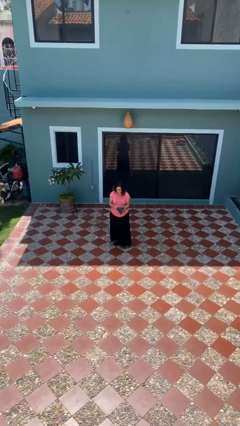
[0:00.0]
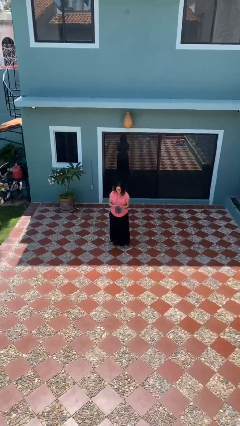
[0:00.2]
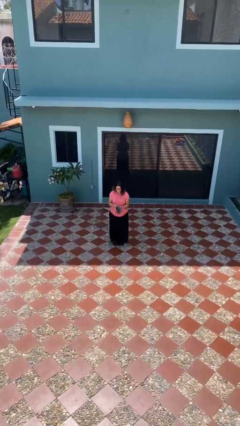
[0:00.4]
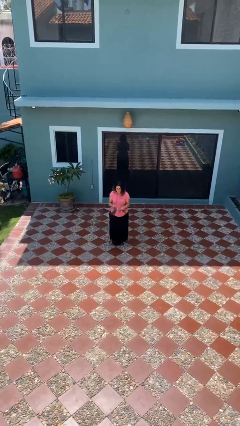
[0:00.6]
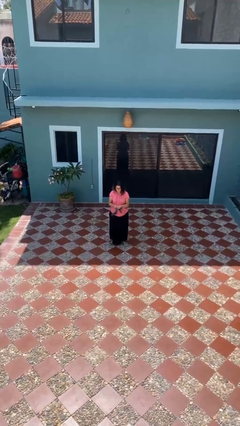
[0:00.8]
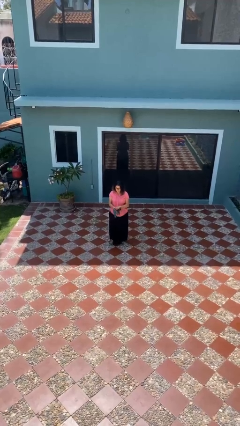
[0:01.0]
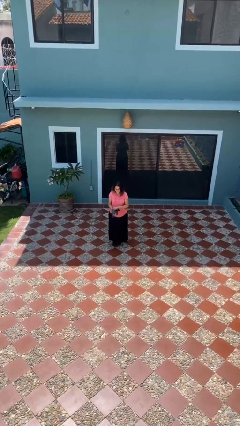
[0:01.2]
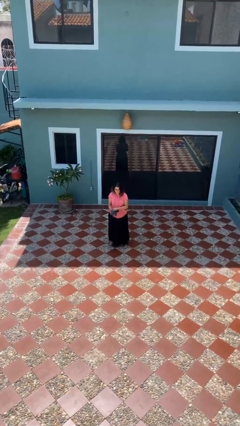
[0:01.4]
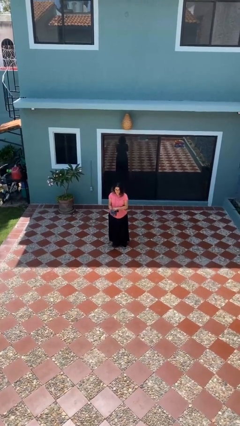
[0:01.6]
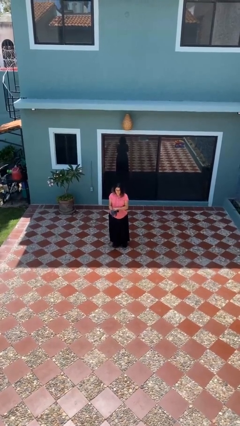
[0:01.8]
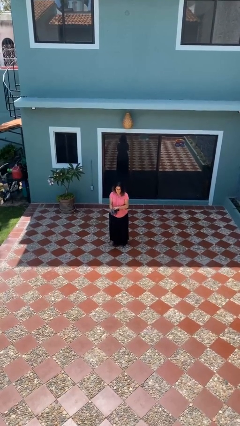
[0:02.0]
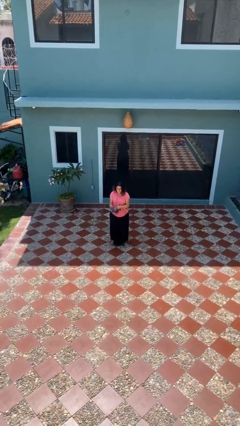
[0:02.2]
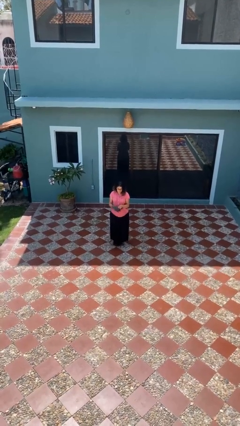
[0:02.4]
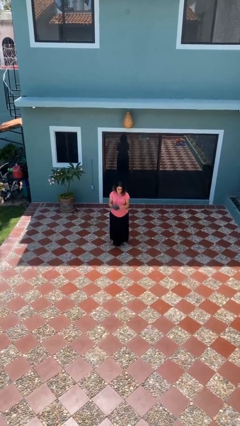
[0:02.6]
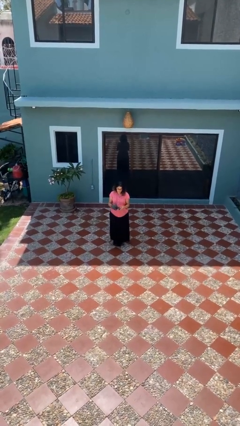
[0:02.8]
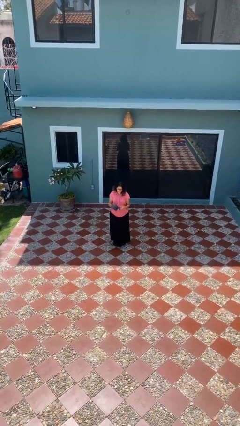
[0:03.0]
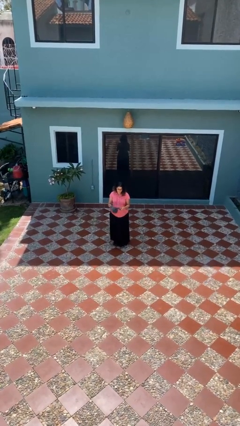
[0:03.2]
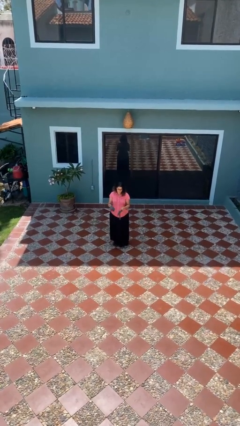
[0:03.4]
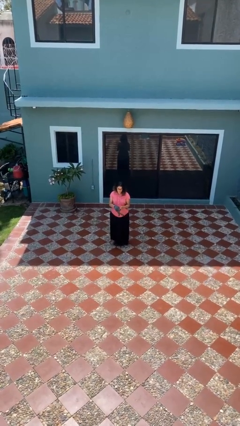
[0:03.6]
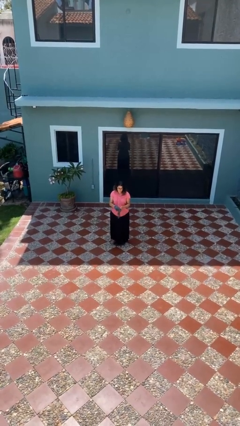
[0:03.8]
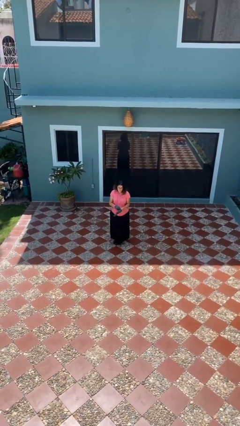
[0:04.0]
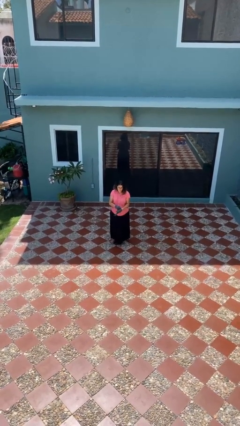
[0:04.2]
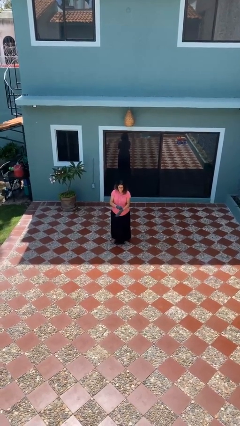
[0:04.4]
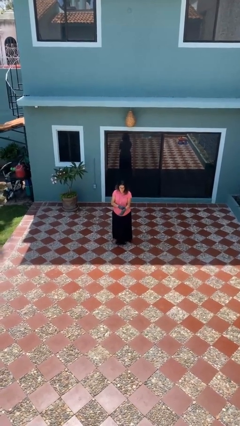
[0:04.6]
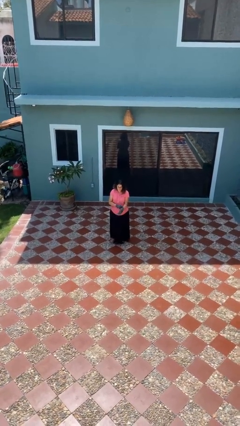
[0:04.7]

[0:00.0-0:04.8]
person puts on gloves

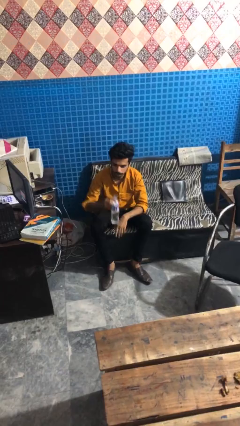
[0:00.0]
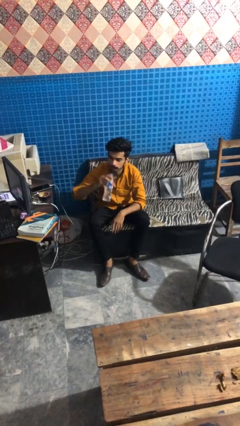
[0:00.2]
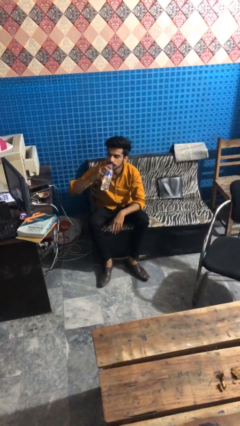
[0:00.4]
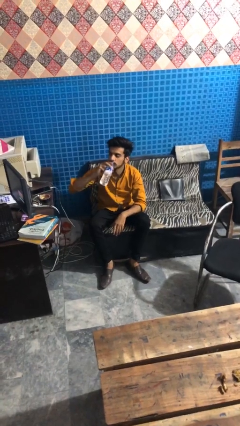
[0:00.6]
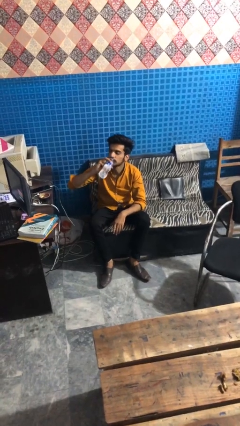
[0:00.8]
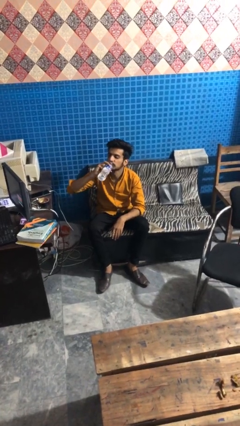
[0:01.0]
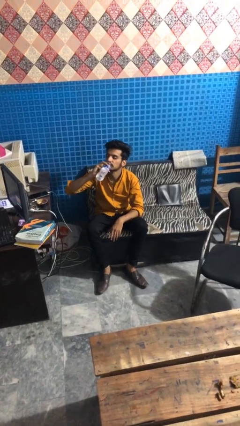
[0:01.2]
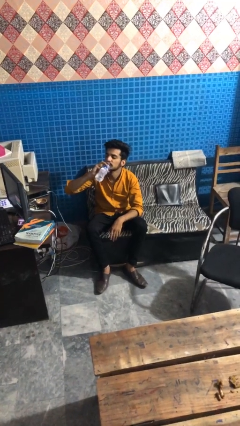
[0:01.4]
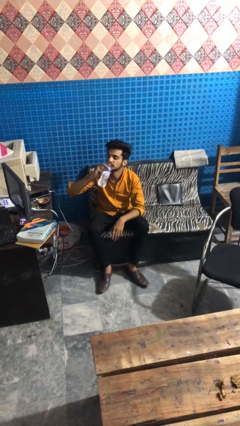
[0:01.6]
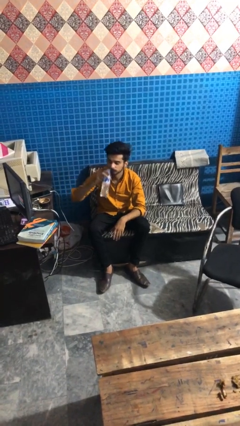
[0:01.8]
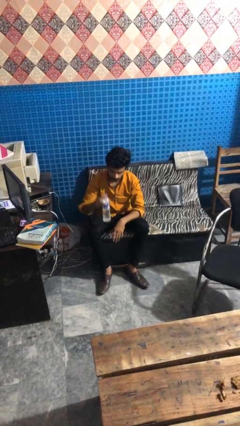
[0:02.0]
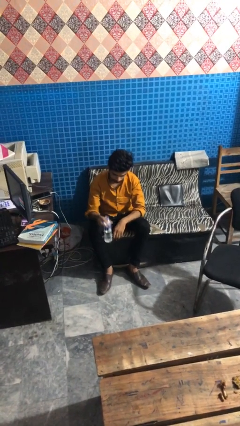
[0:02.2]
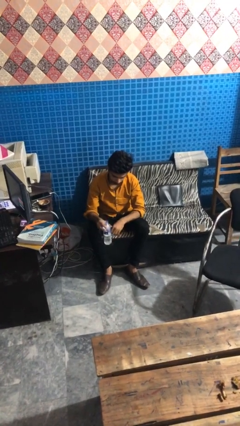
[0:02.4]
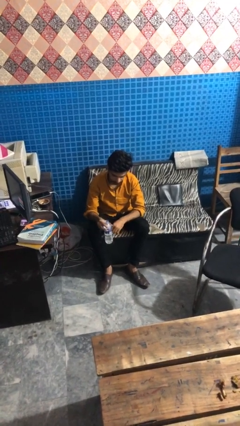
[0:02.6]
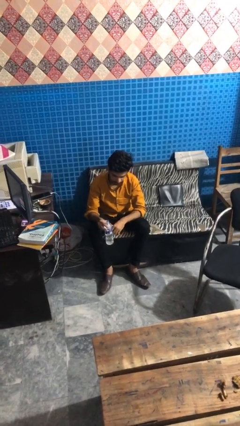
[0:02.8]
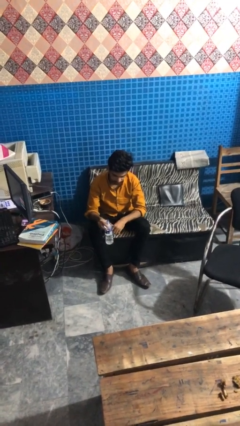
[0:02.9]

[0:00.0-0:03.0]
person drinks from bottle

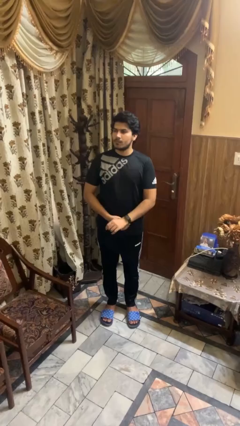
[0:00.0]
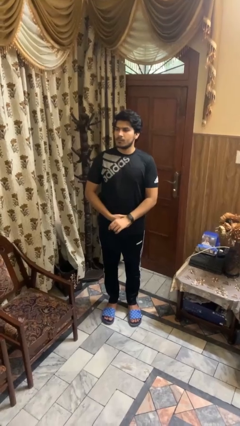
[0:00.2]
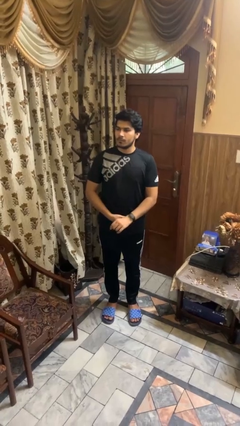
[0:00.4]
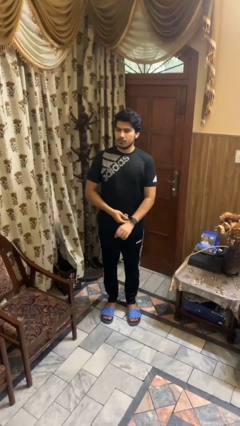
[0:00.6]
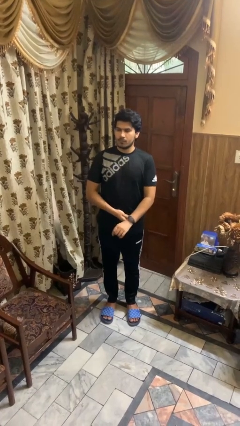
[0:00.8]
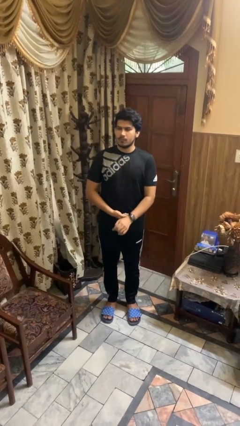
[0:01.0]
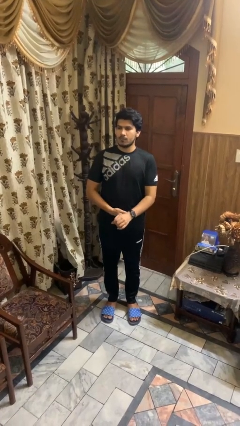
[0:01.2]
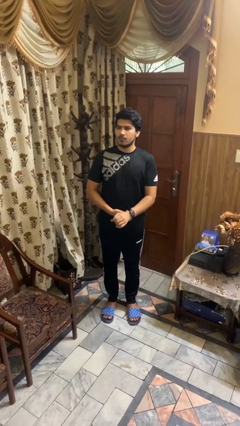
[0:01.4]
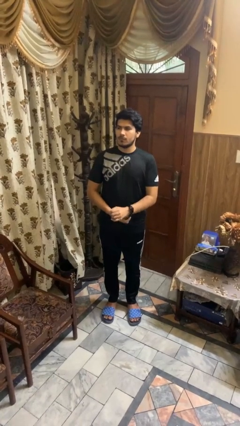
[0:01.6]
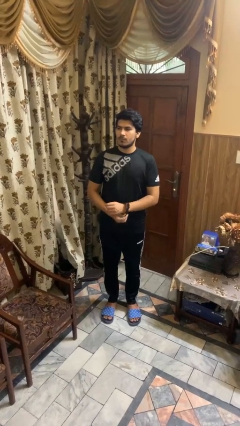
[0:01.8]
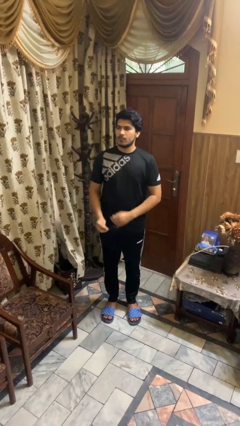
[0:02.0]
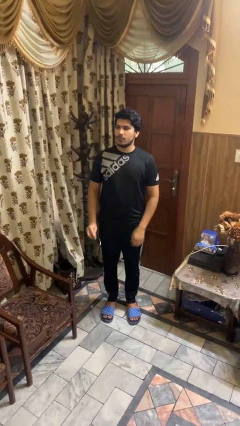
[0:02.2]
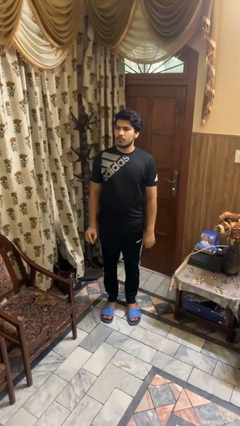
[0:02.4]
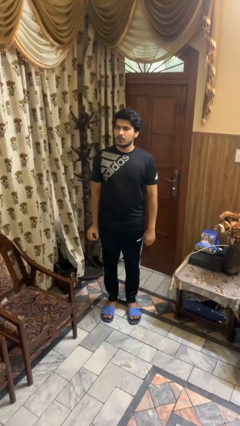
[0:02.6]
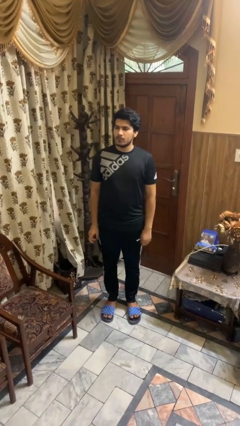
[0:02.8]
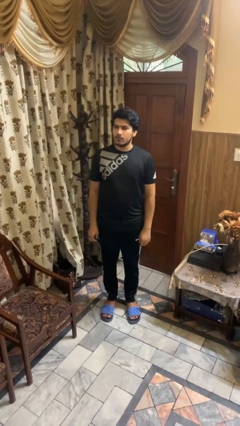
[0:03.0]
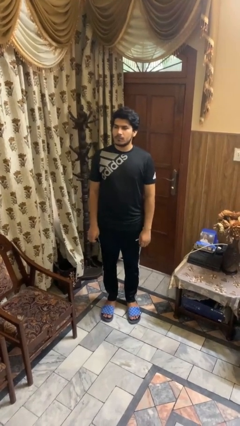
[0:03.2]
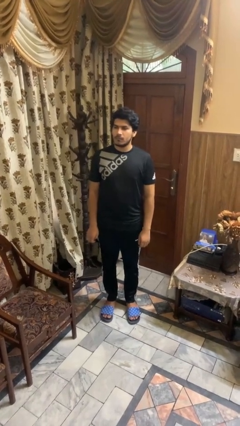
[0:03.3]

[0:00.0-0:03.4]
person takes off wristwatch

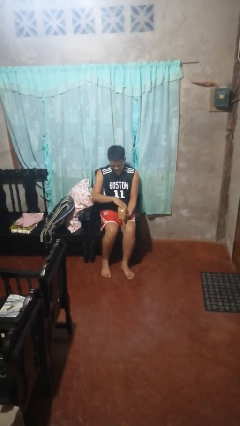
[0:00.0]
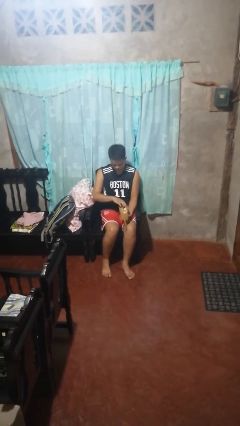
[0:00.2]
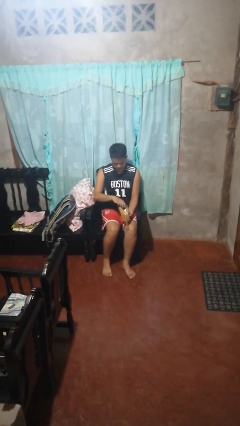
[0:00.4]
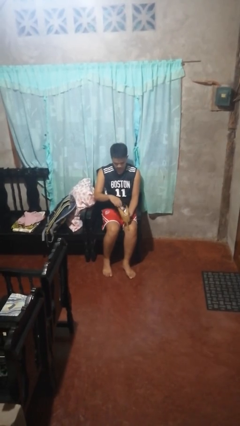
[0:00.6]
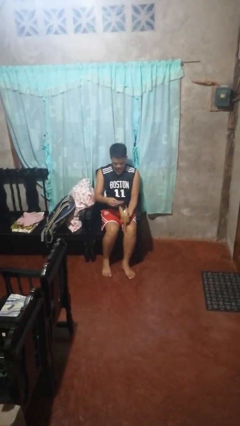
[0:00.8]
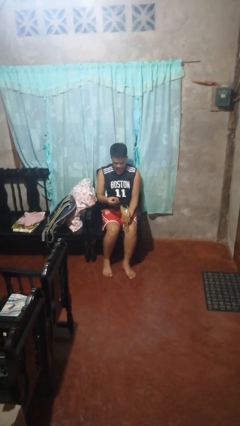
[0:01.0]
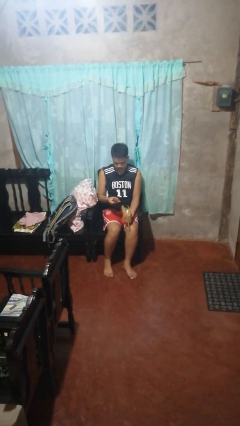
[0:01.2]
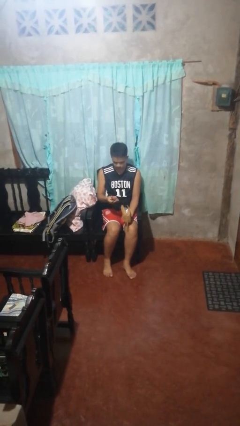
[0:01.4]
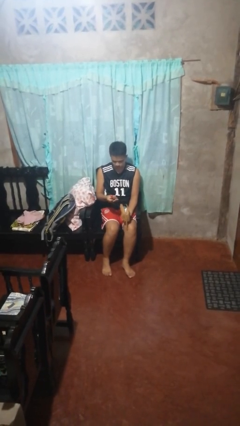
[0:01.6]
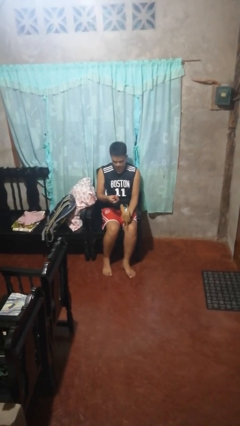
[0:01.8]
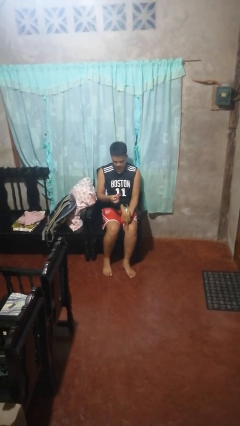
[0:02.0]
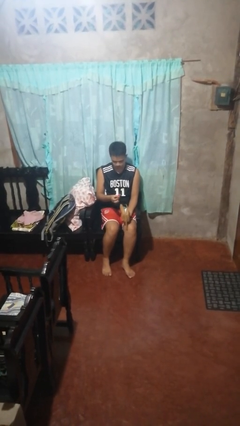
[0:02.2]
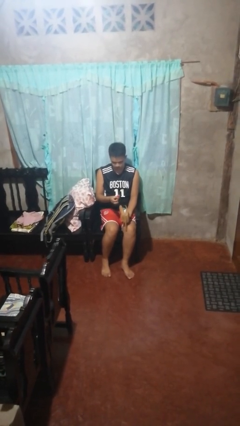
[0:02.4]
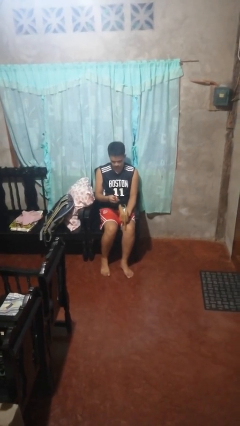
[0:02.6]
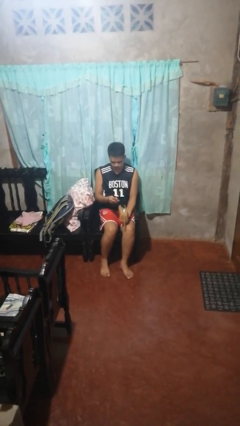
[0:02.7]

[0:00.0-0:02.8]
person takes object from purse

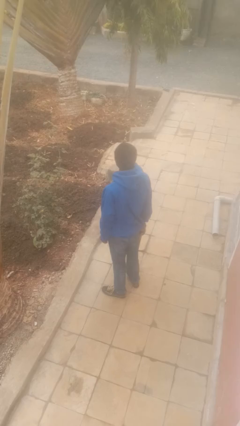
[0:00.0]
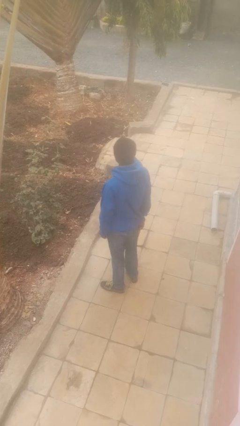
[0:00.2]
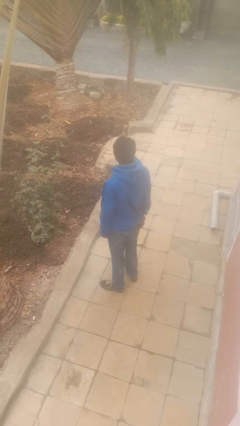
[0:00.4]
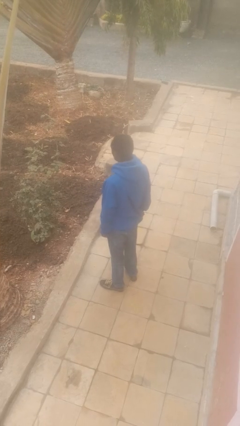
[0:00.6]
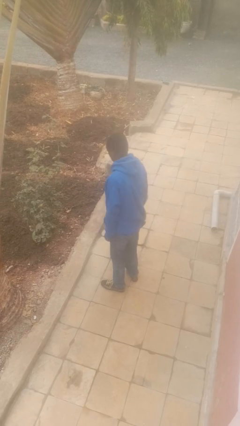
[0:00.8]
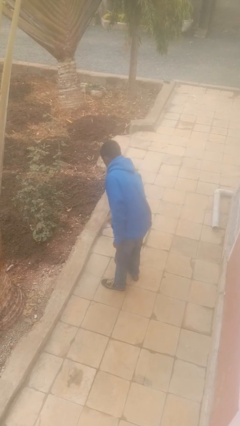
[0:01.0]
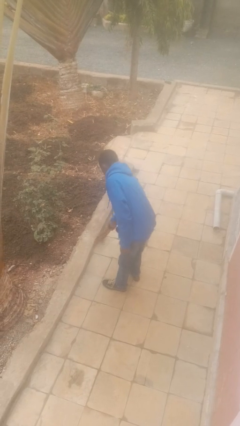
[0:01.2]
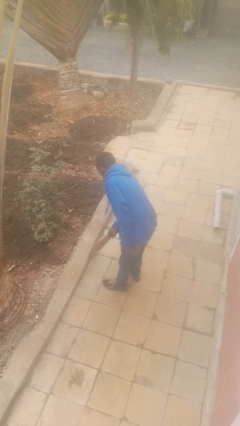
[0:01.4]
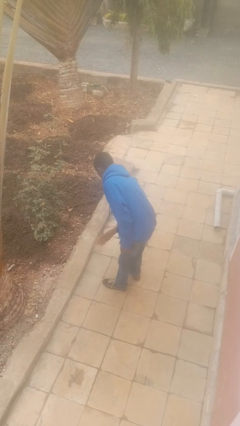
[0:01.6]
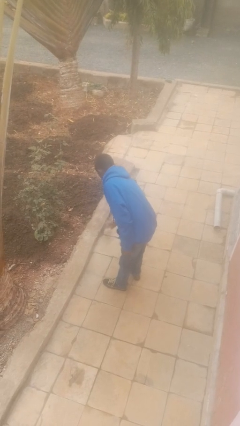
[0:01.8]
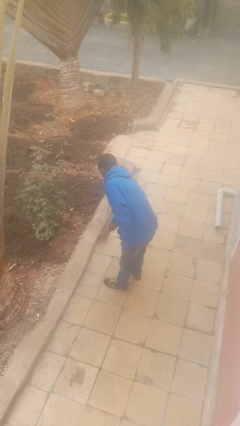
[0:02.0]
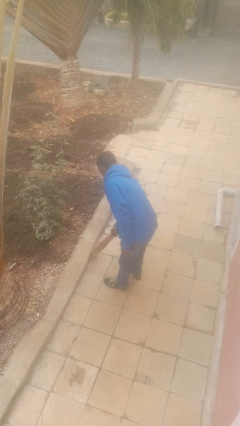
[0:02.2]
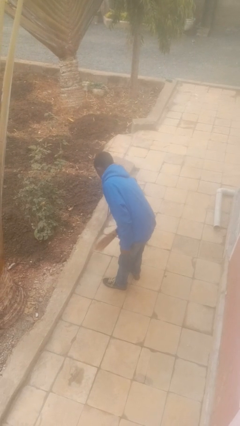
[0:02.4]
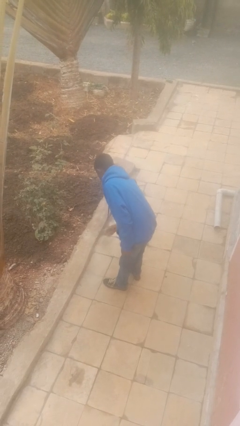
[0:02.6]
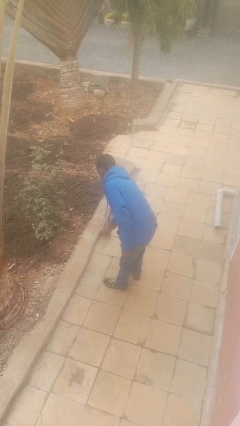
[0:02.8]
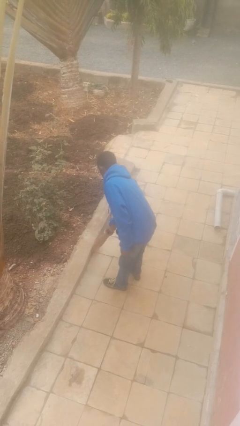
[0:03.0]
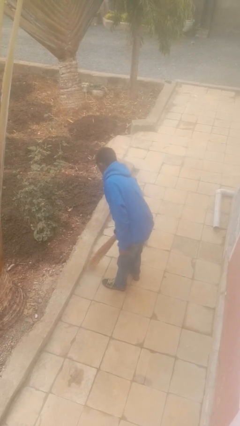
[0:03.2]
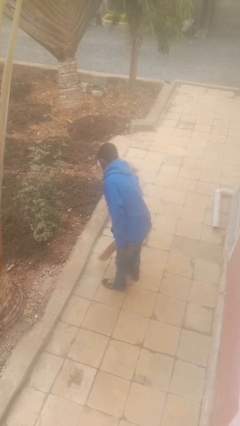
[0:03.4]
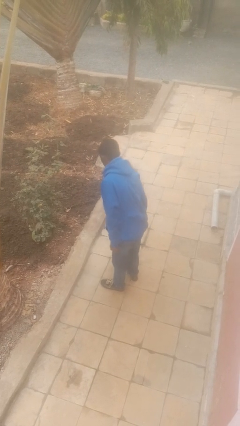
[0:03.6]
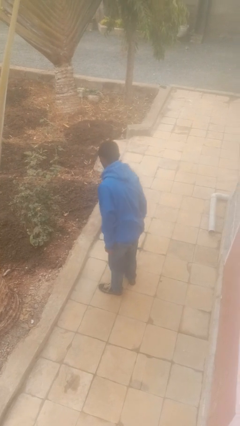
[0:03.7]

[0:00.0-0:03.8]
person sweeps floor
